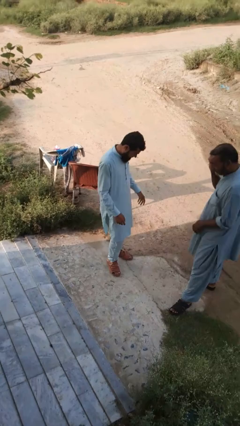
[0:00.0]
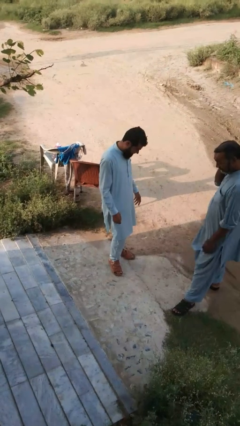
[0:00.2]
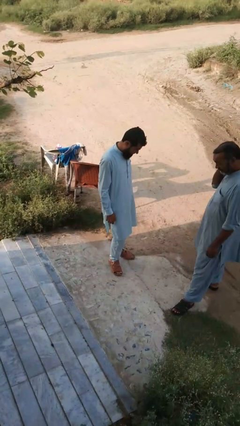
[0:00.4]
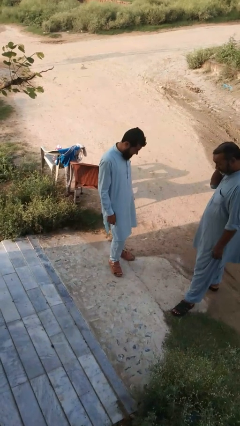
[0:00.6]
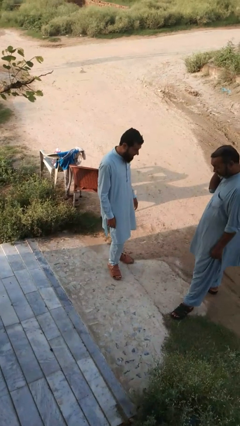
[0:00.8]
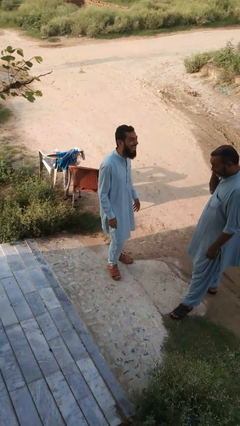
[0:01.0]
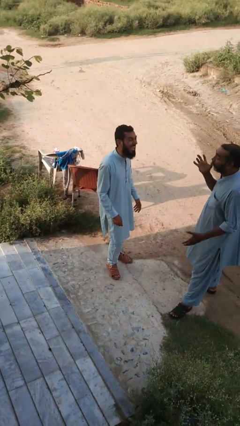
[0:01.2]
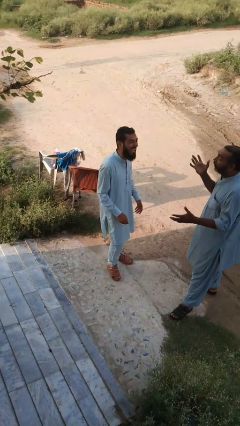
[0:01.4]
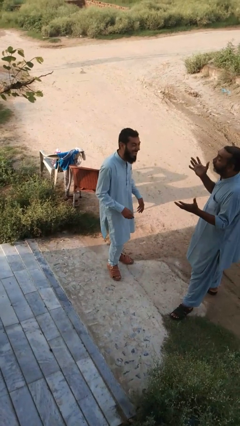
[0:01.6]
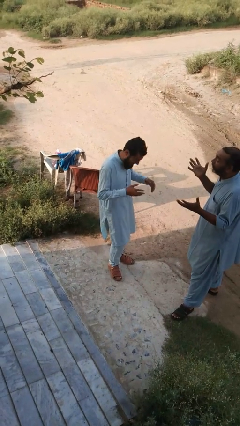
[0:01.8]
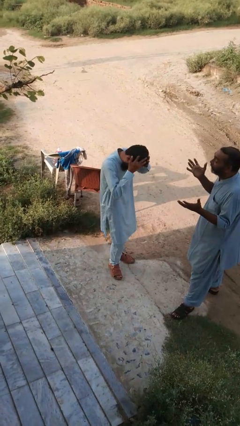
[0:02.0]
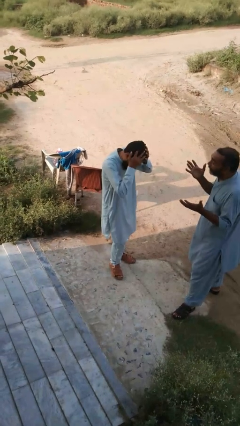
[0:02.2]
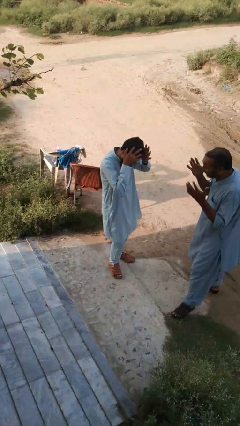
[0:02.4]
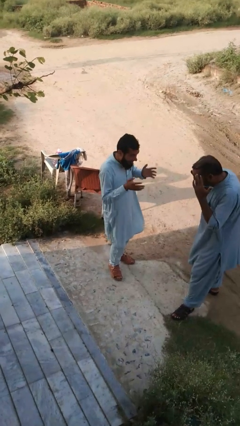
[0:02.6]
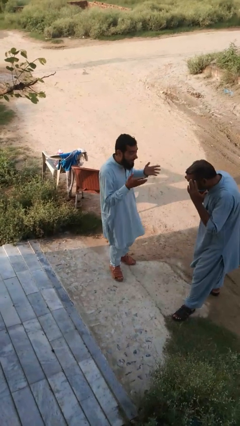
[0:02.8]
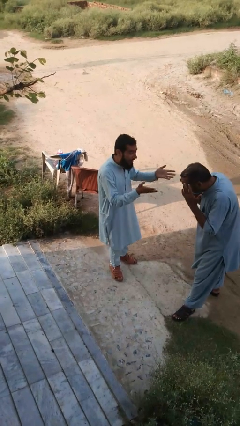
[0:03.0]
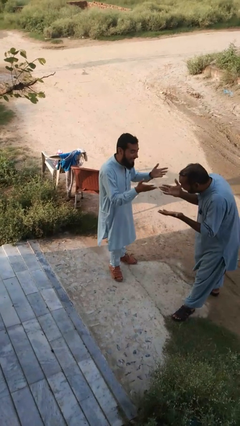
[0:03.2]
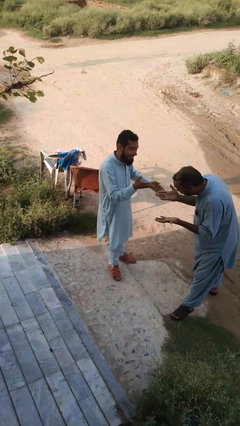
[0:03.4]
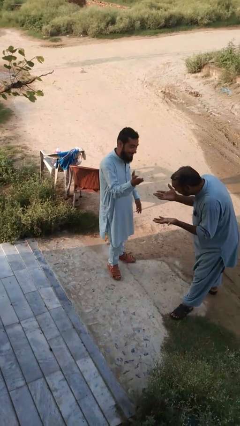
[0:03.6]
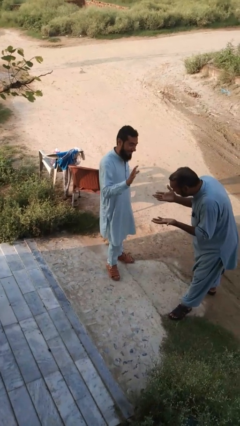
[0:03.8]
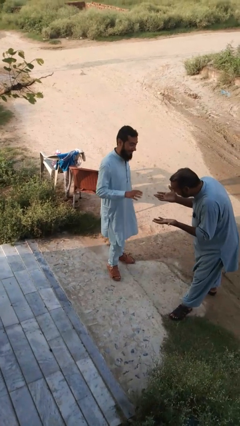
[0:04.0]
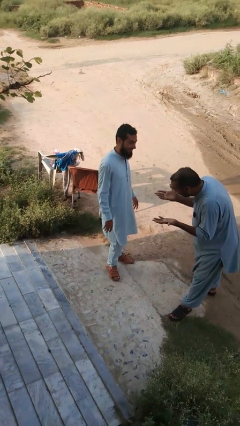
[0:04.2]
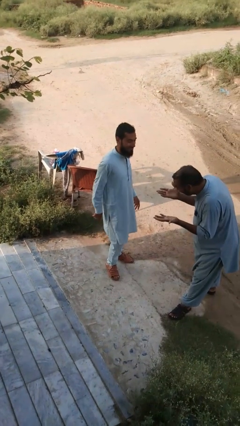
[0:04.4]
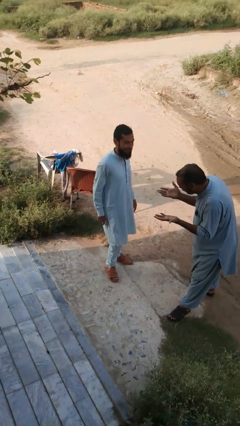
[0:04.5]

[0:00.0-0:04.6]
person laughs with person

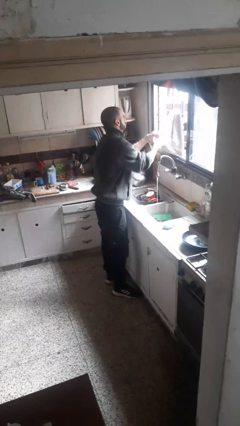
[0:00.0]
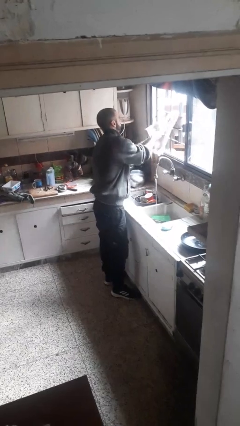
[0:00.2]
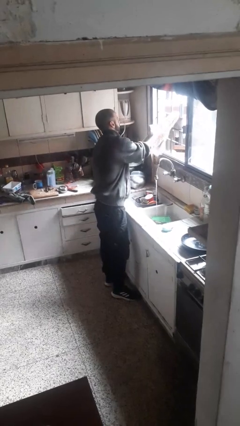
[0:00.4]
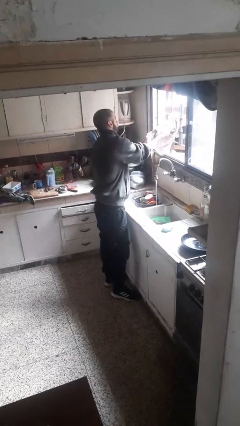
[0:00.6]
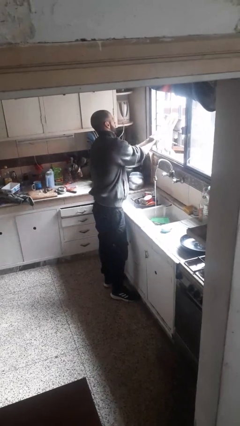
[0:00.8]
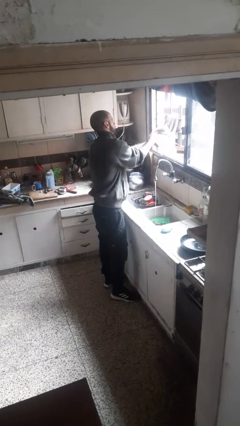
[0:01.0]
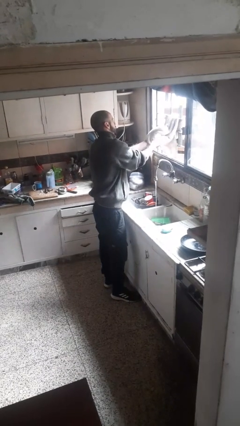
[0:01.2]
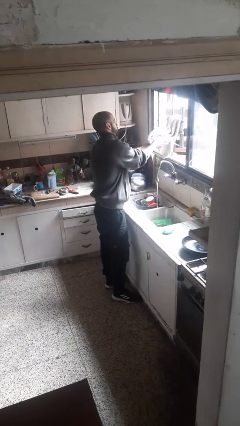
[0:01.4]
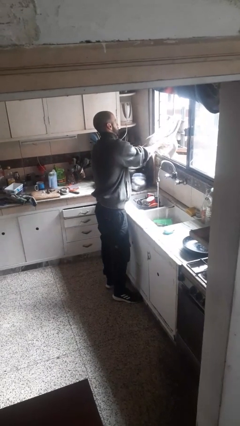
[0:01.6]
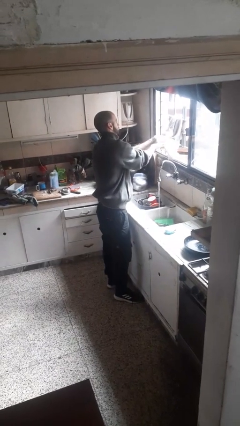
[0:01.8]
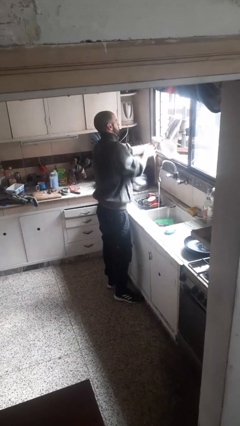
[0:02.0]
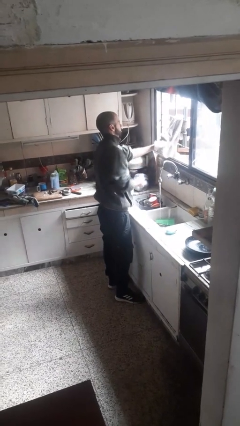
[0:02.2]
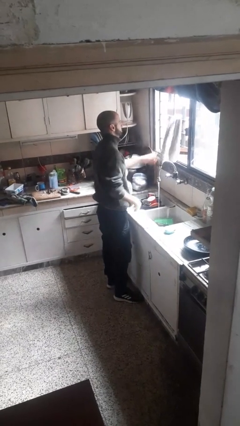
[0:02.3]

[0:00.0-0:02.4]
person dries hands with towel

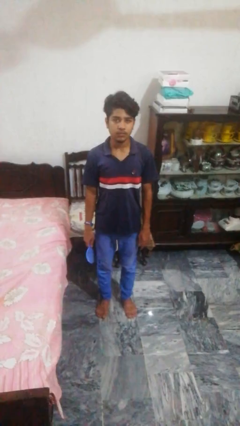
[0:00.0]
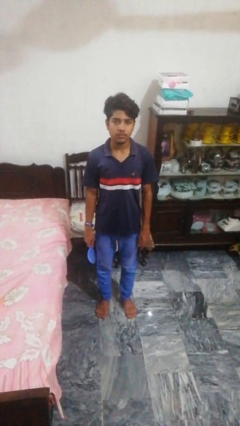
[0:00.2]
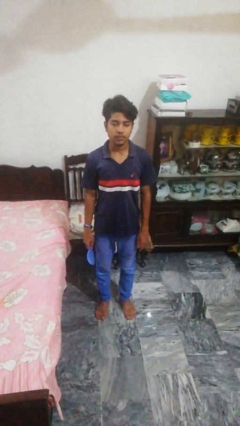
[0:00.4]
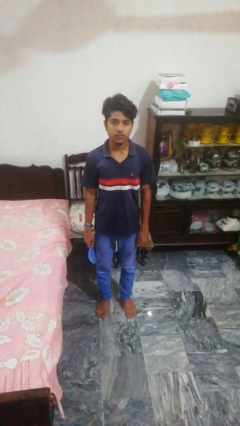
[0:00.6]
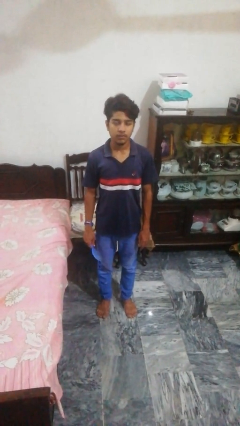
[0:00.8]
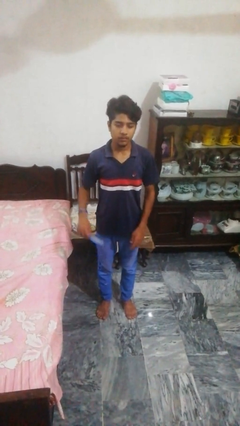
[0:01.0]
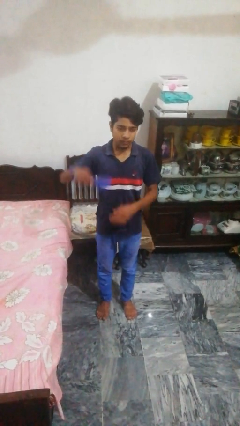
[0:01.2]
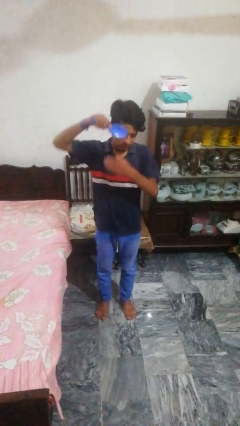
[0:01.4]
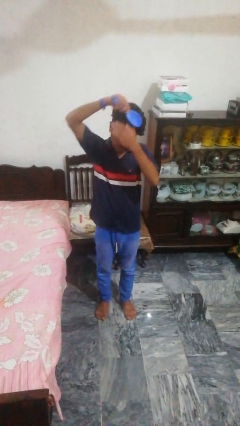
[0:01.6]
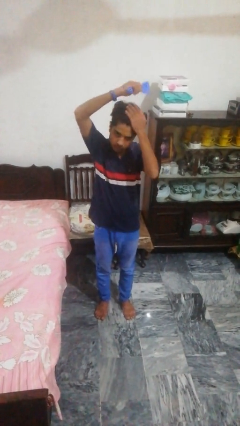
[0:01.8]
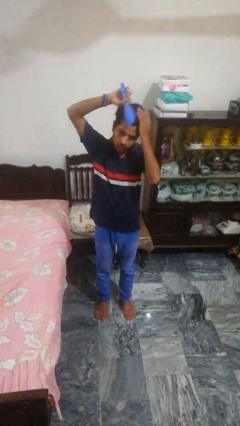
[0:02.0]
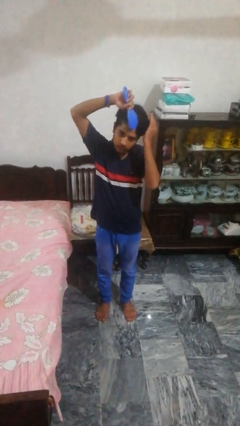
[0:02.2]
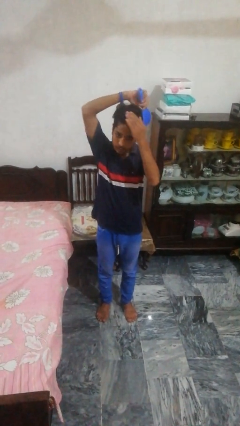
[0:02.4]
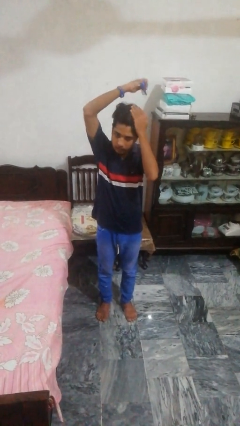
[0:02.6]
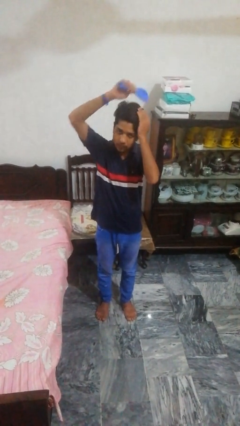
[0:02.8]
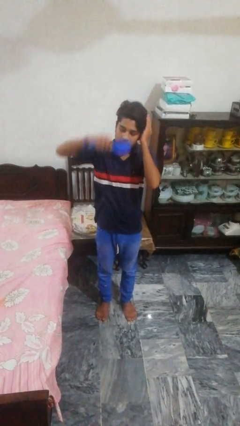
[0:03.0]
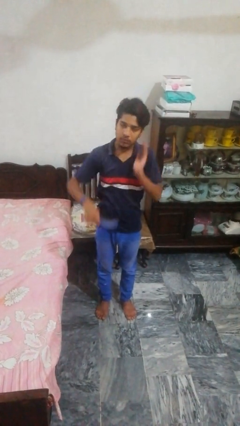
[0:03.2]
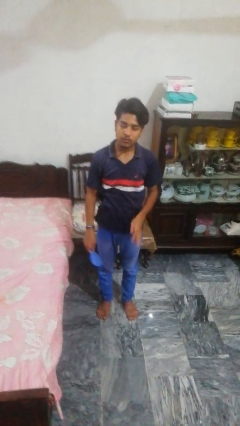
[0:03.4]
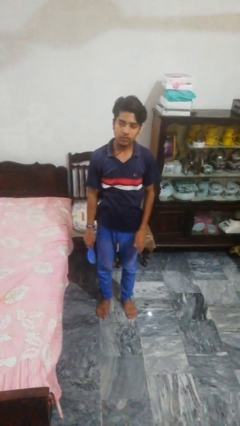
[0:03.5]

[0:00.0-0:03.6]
person brushes hair

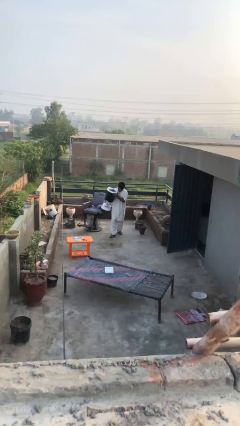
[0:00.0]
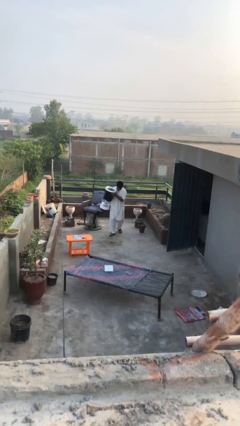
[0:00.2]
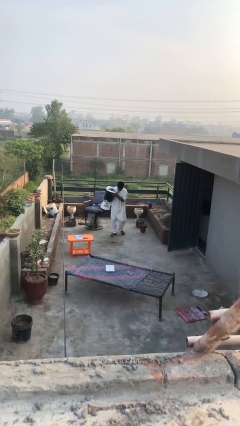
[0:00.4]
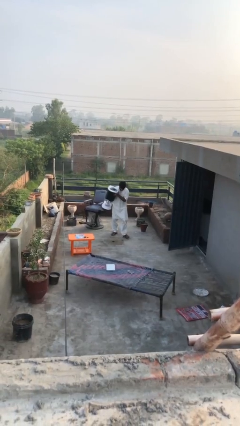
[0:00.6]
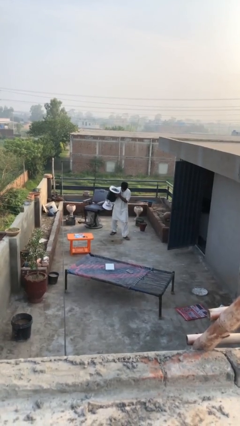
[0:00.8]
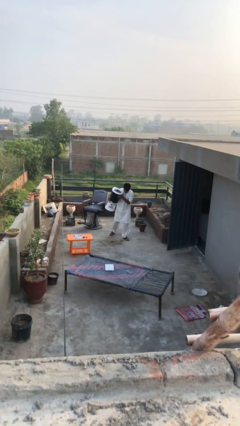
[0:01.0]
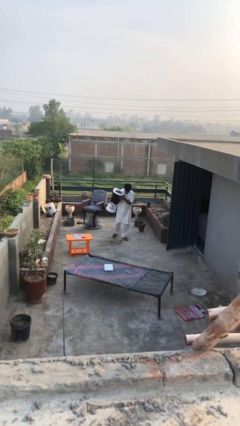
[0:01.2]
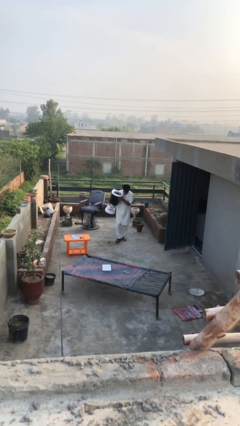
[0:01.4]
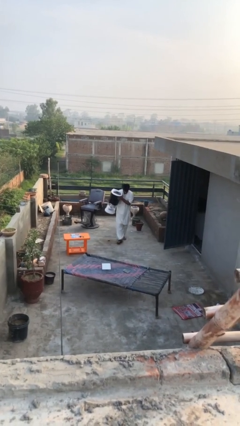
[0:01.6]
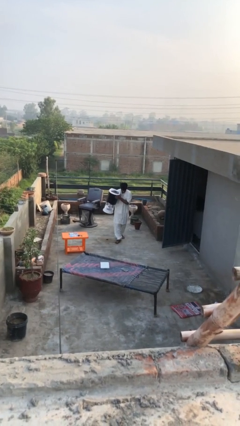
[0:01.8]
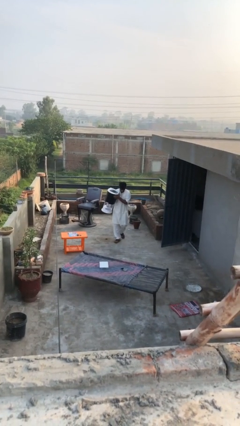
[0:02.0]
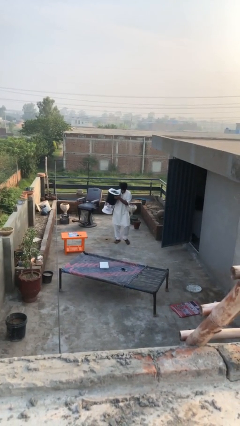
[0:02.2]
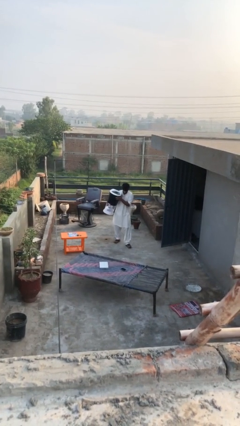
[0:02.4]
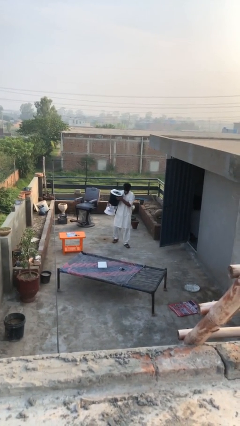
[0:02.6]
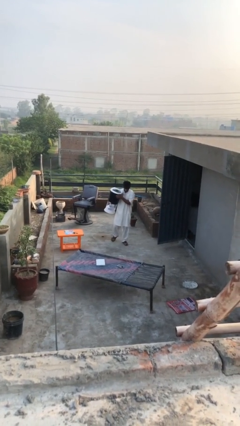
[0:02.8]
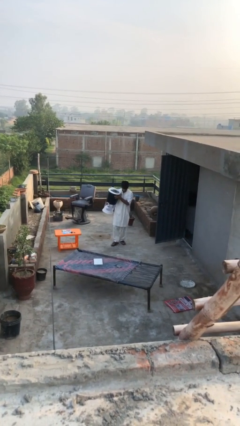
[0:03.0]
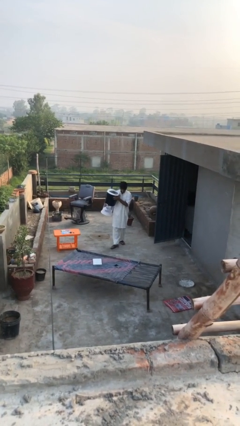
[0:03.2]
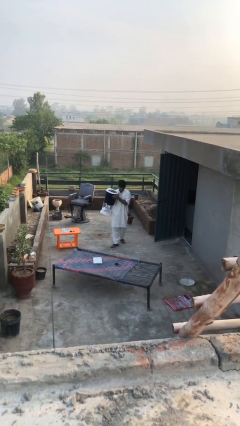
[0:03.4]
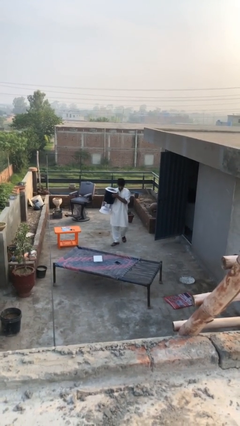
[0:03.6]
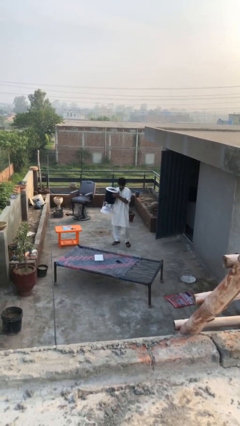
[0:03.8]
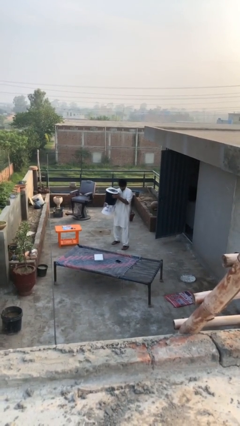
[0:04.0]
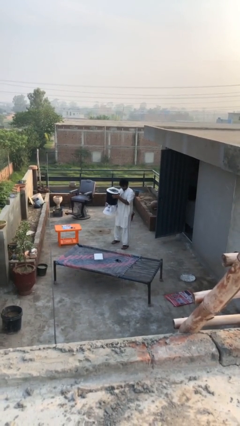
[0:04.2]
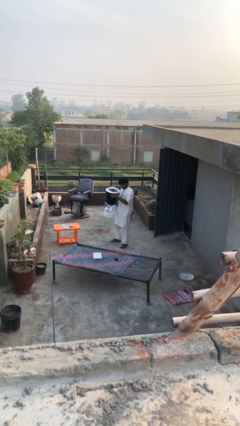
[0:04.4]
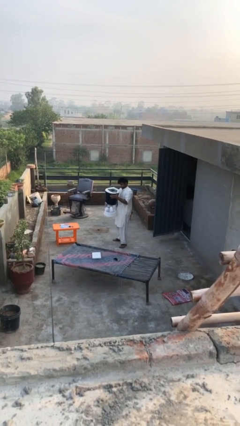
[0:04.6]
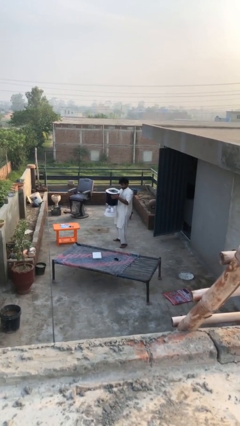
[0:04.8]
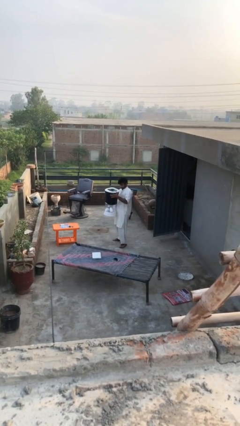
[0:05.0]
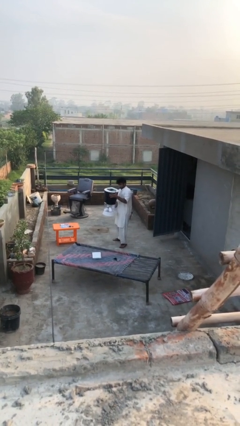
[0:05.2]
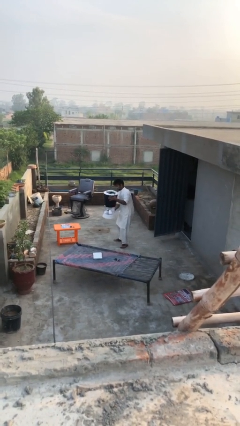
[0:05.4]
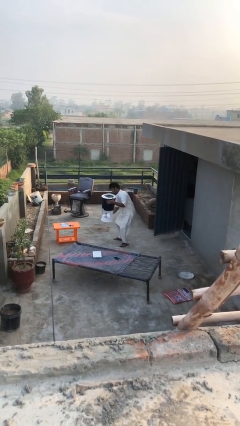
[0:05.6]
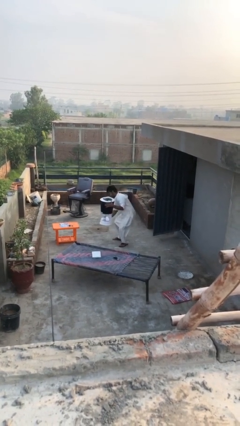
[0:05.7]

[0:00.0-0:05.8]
person carries heavy object

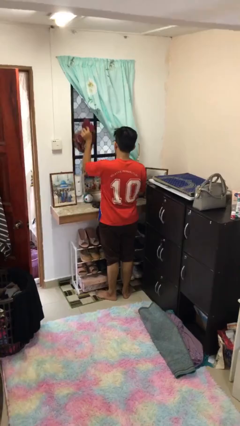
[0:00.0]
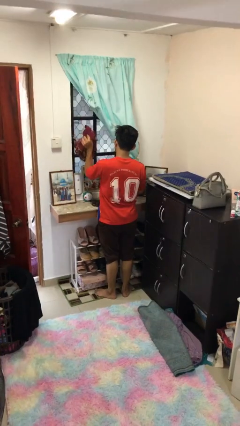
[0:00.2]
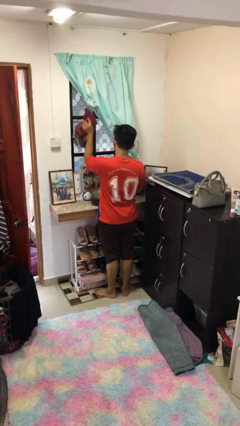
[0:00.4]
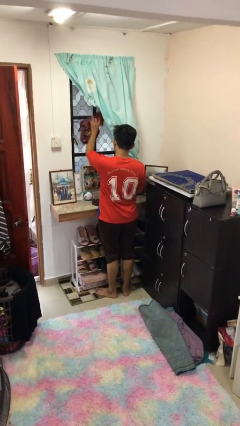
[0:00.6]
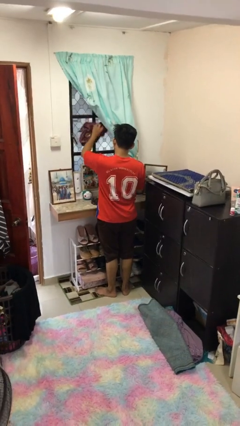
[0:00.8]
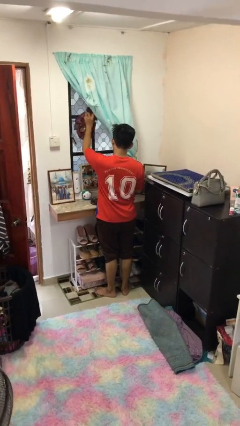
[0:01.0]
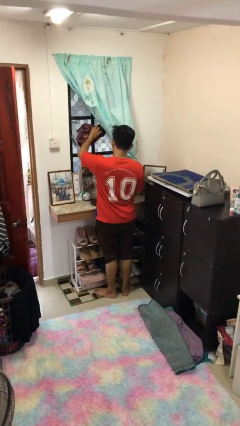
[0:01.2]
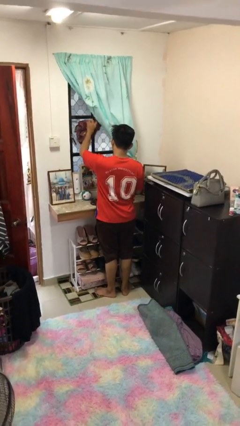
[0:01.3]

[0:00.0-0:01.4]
person washes window
